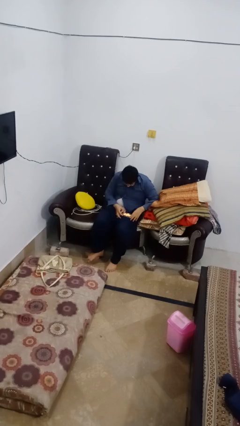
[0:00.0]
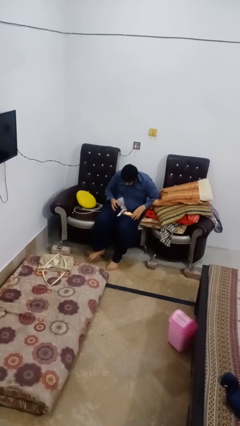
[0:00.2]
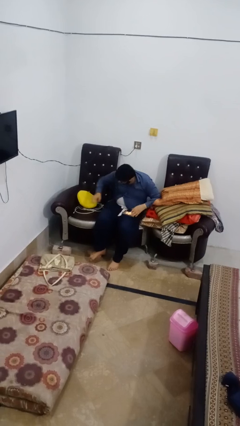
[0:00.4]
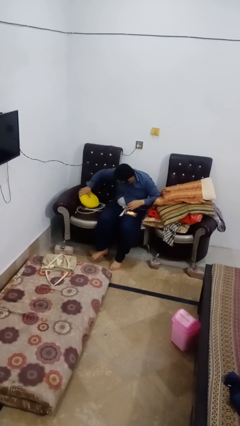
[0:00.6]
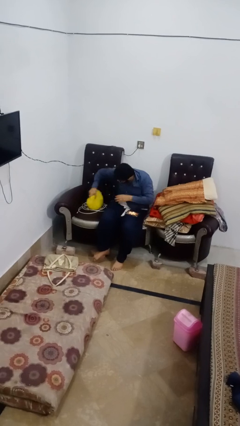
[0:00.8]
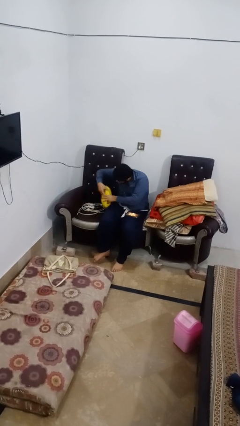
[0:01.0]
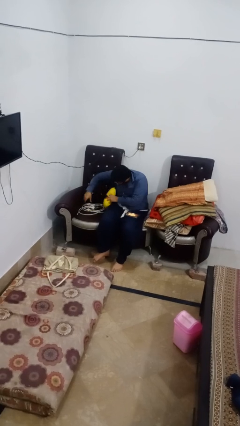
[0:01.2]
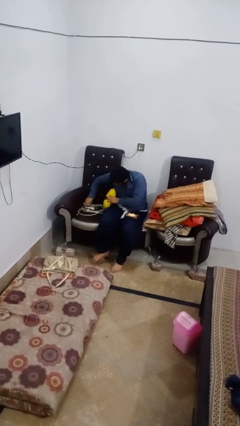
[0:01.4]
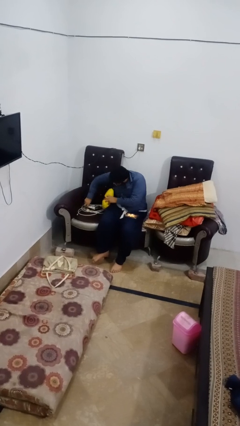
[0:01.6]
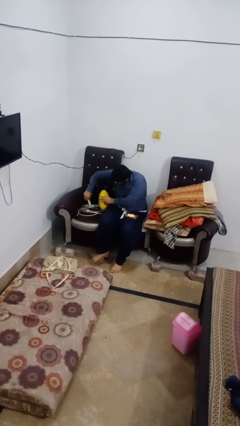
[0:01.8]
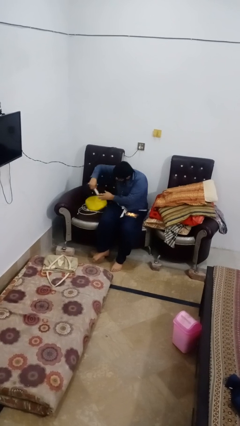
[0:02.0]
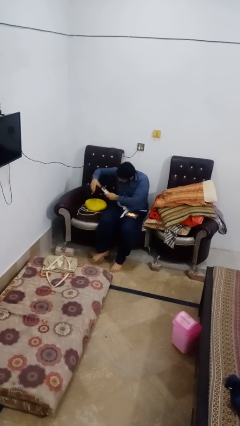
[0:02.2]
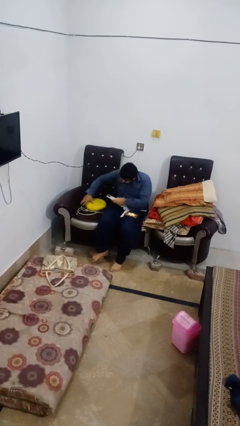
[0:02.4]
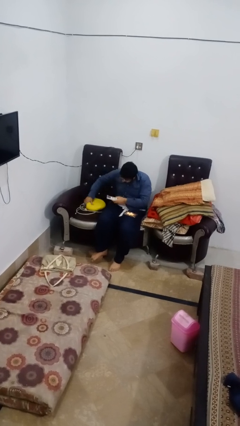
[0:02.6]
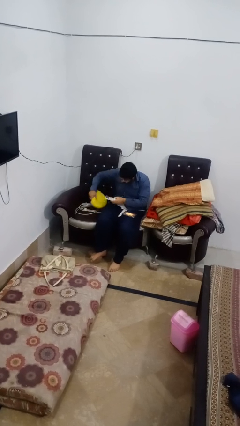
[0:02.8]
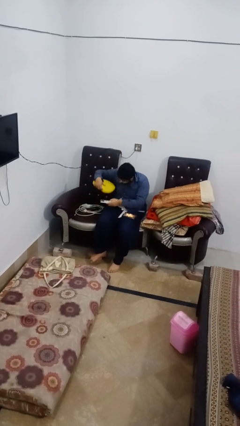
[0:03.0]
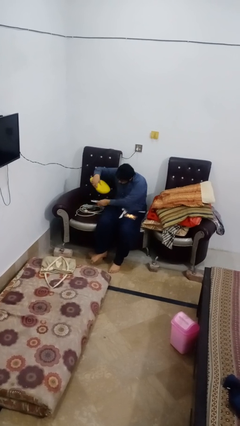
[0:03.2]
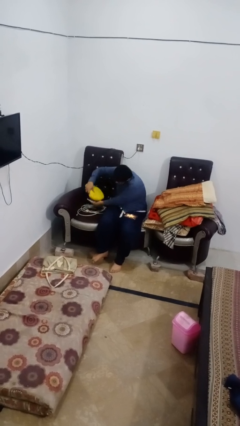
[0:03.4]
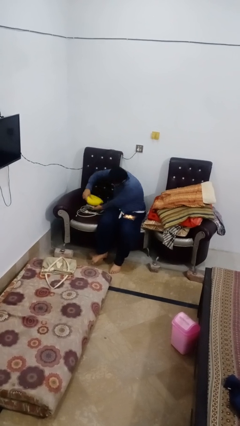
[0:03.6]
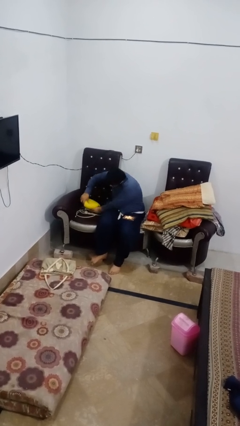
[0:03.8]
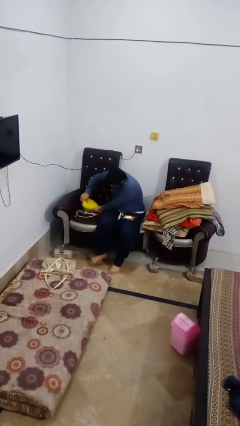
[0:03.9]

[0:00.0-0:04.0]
person searches in couch

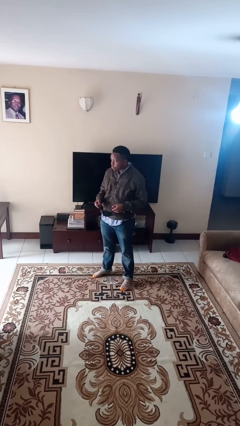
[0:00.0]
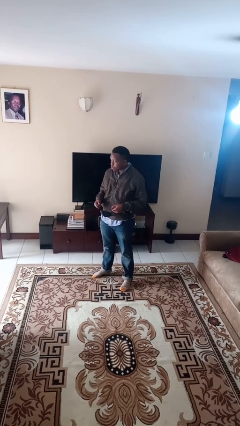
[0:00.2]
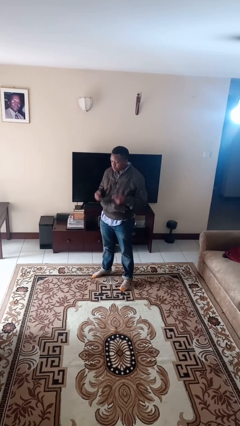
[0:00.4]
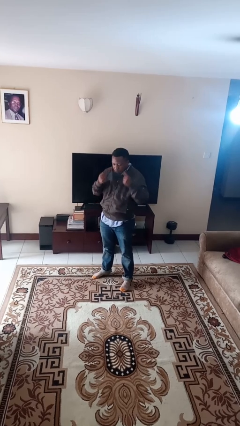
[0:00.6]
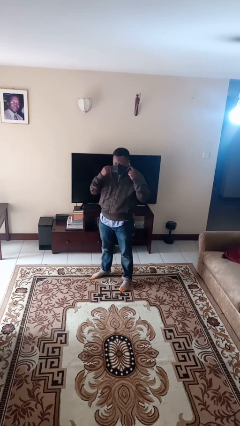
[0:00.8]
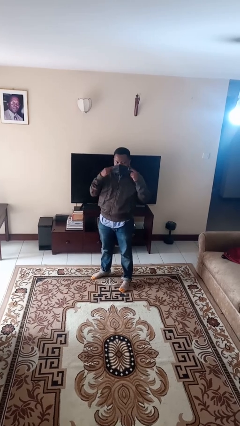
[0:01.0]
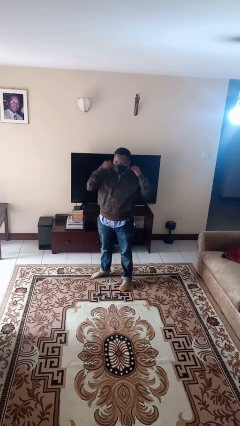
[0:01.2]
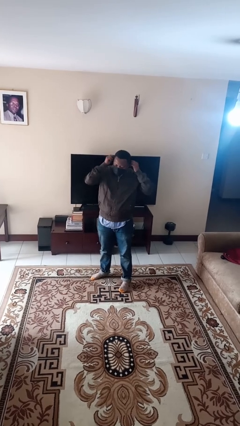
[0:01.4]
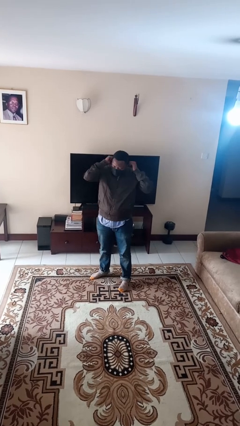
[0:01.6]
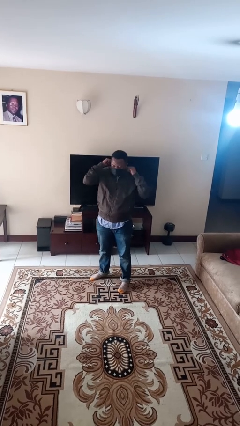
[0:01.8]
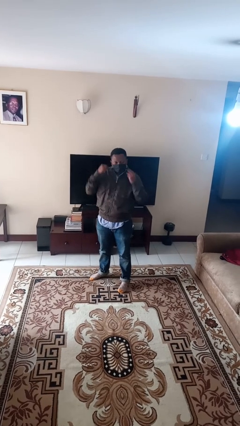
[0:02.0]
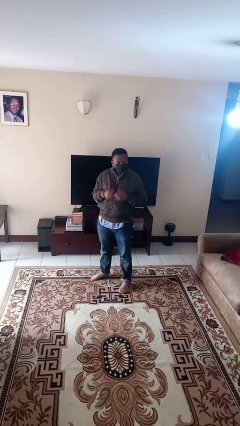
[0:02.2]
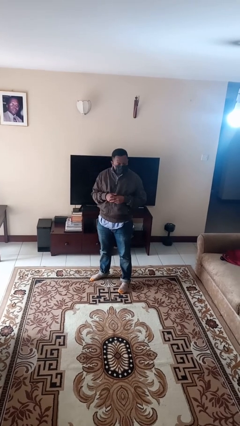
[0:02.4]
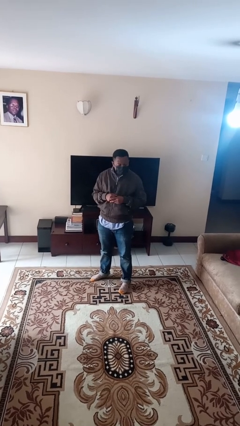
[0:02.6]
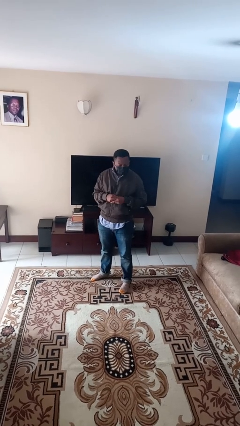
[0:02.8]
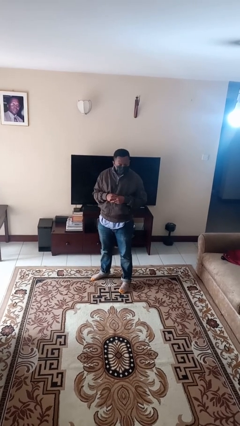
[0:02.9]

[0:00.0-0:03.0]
person puts on facemask

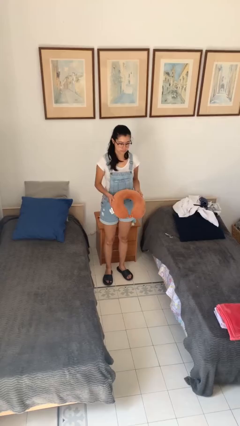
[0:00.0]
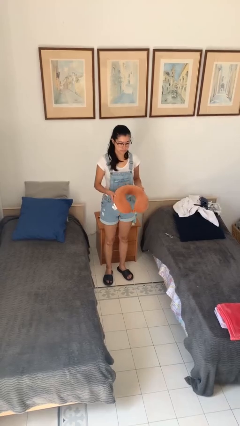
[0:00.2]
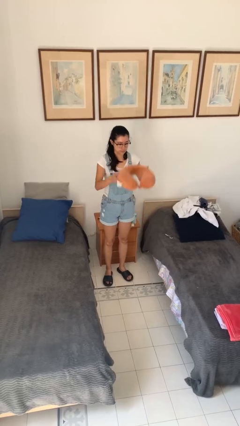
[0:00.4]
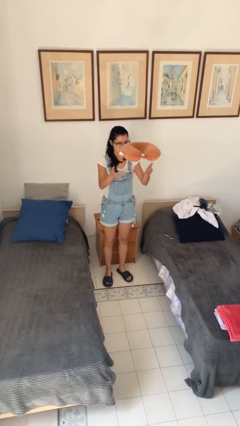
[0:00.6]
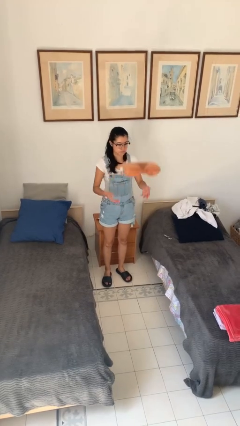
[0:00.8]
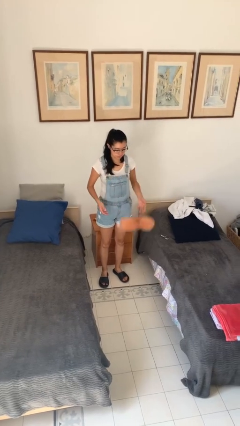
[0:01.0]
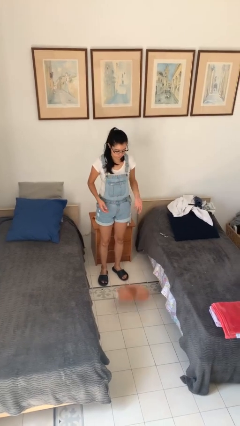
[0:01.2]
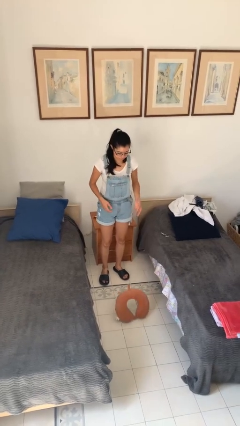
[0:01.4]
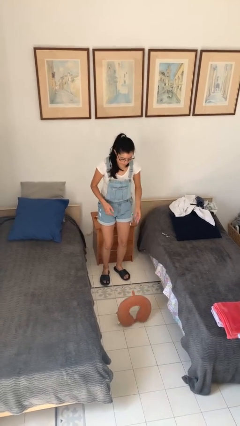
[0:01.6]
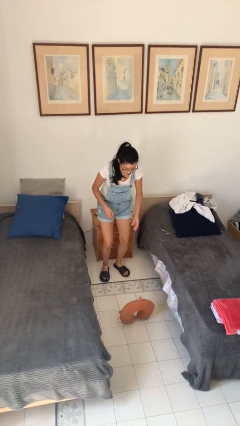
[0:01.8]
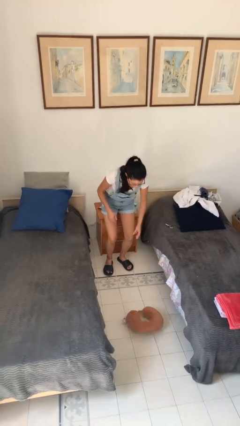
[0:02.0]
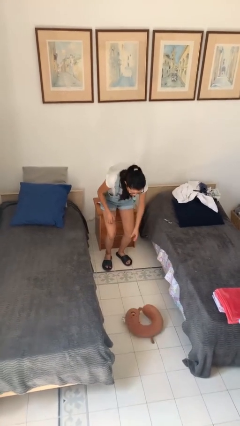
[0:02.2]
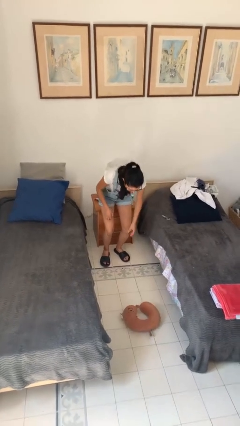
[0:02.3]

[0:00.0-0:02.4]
person throws object into air

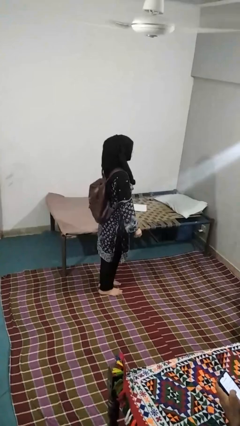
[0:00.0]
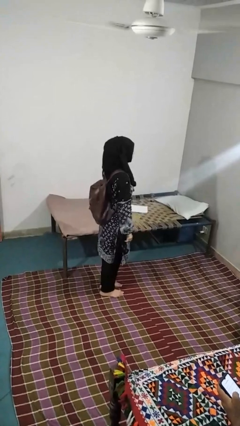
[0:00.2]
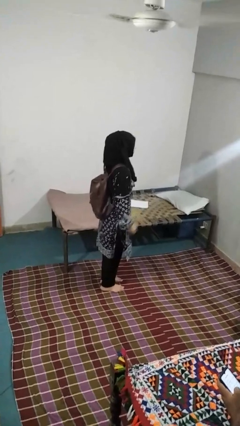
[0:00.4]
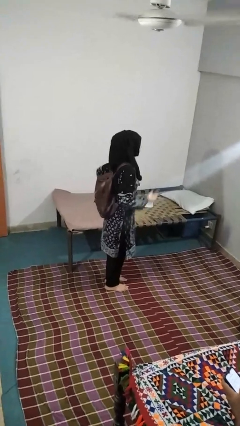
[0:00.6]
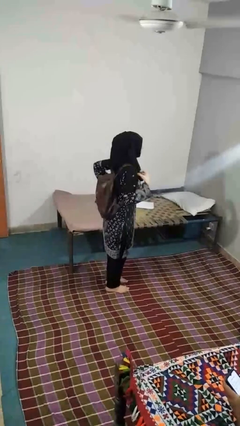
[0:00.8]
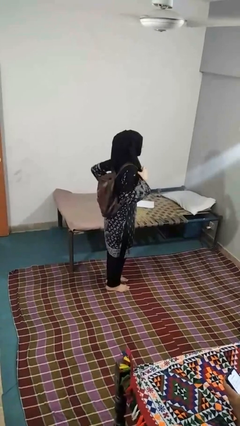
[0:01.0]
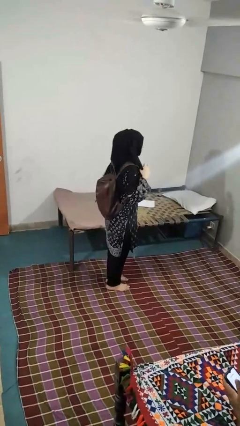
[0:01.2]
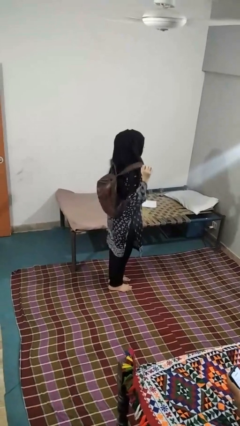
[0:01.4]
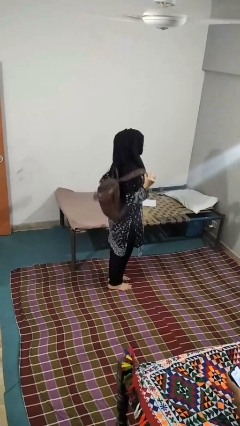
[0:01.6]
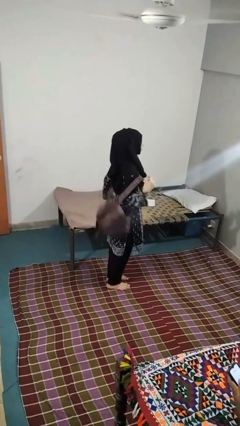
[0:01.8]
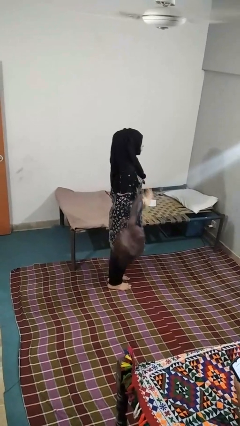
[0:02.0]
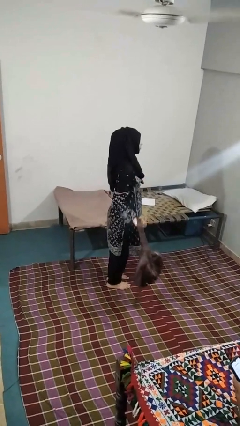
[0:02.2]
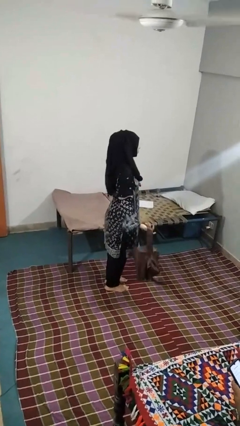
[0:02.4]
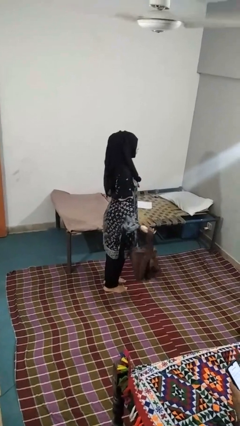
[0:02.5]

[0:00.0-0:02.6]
person takes off backpack

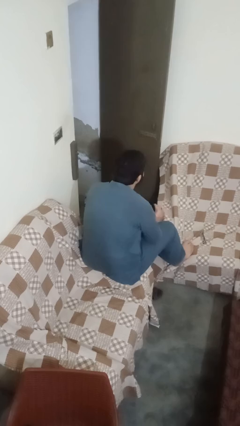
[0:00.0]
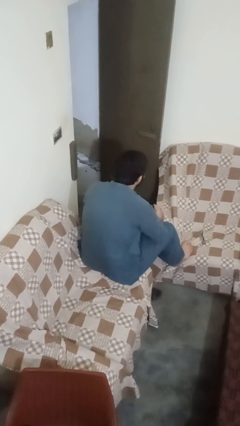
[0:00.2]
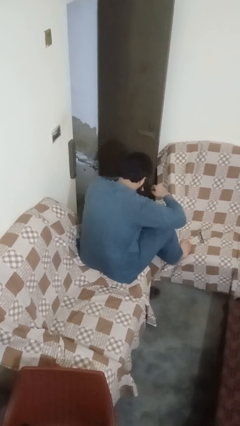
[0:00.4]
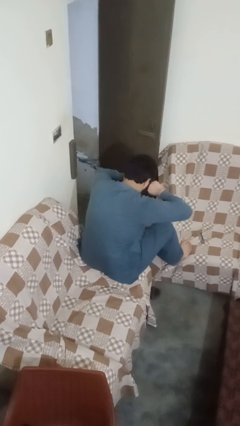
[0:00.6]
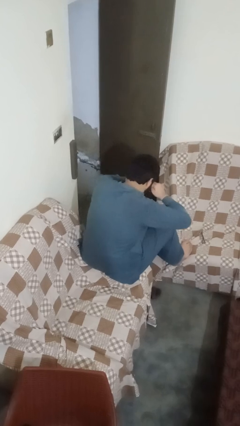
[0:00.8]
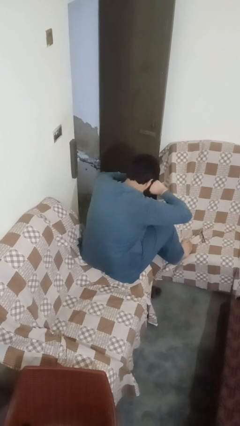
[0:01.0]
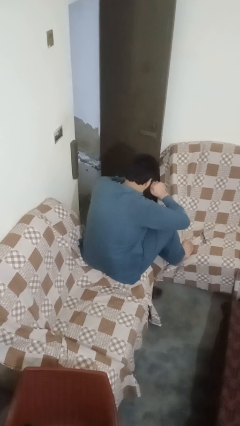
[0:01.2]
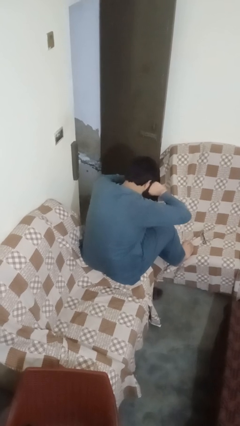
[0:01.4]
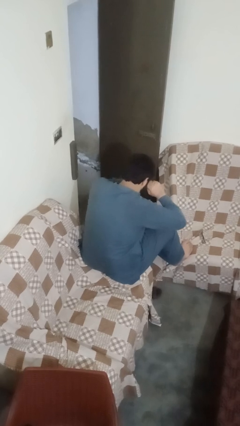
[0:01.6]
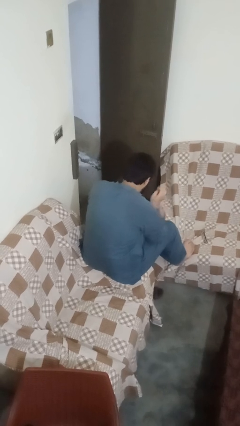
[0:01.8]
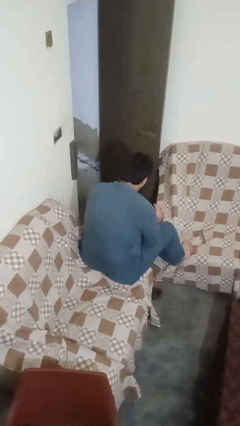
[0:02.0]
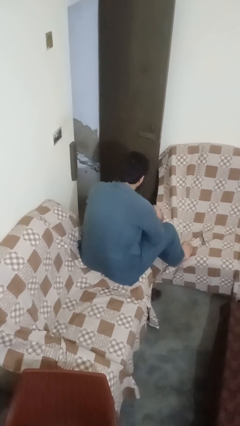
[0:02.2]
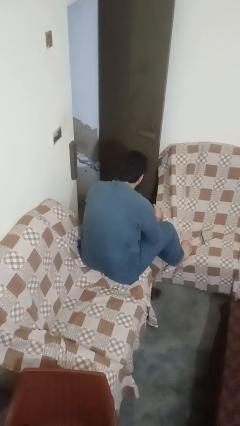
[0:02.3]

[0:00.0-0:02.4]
person rubs eyes

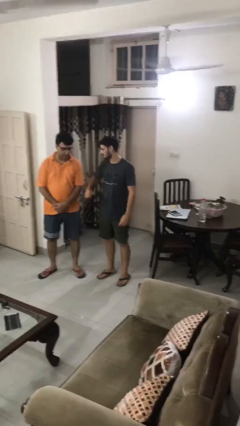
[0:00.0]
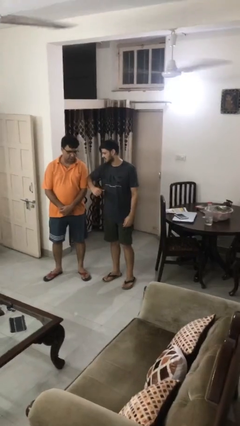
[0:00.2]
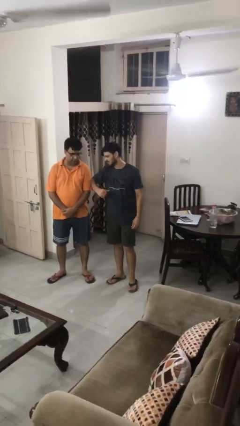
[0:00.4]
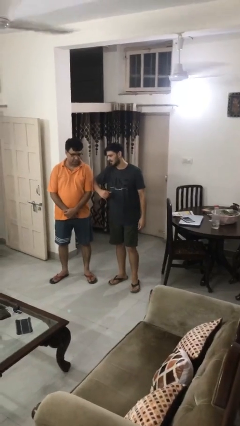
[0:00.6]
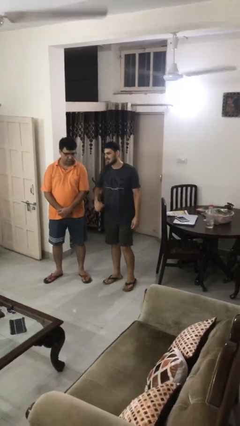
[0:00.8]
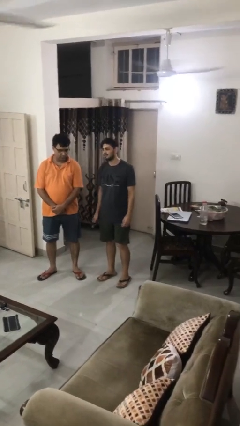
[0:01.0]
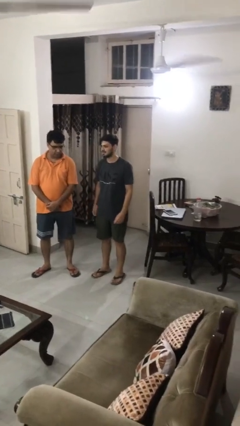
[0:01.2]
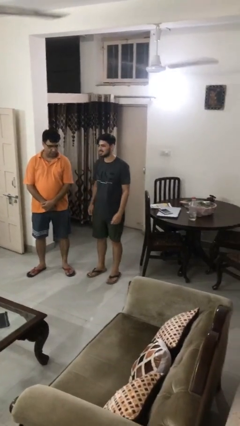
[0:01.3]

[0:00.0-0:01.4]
person nudges person with elbow

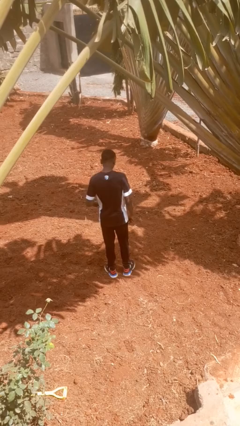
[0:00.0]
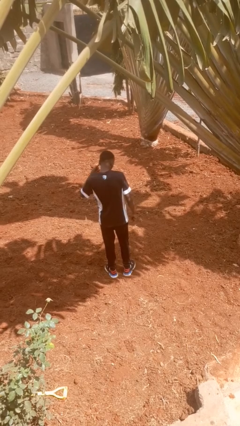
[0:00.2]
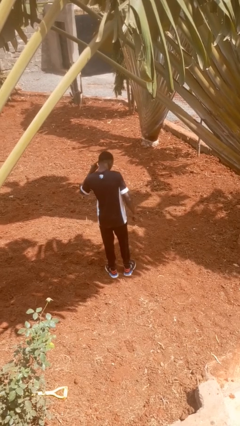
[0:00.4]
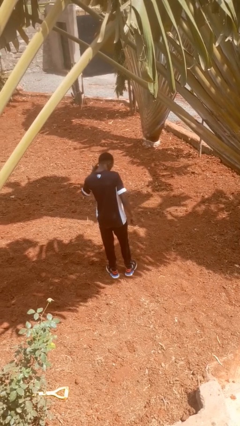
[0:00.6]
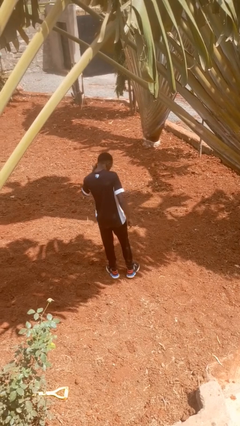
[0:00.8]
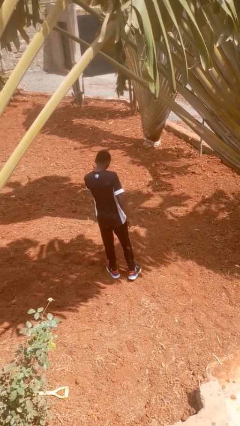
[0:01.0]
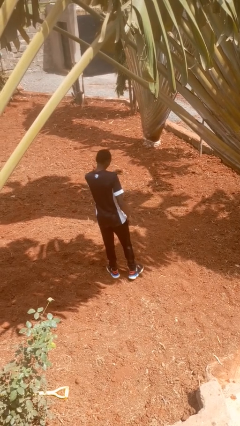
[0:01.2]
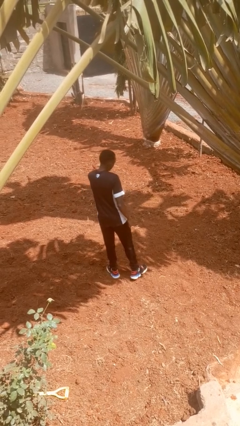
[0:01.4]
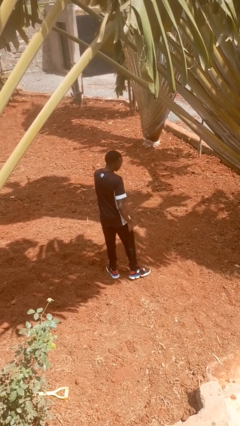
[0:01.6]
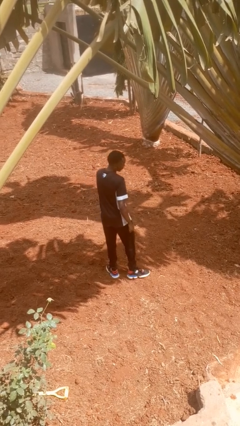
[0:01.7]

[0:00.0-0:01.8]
person gestures listen closely
